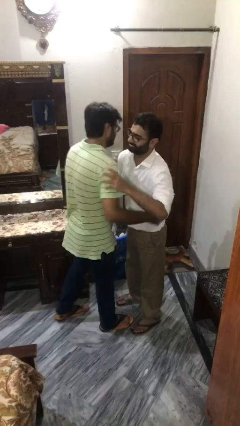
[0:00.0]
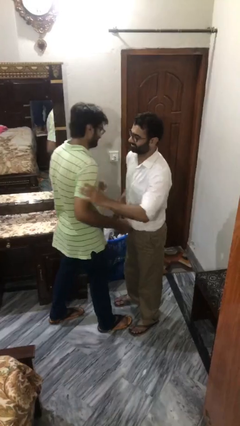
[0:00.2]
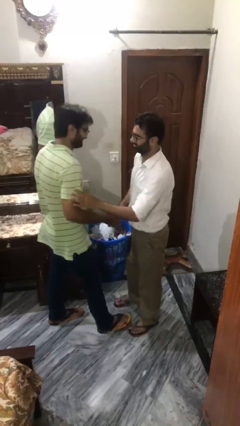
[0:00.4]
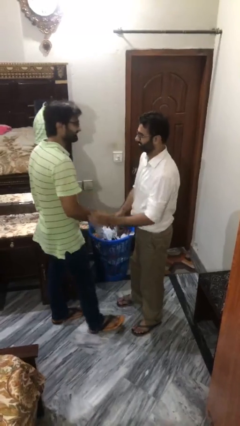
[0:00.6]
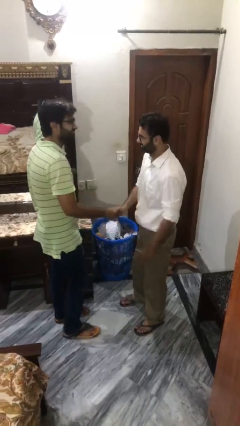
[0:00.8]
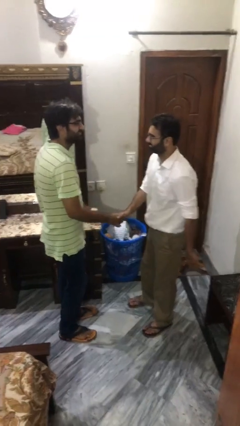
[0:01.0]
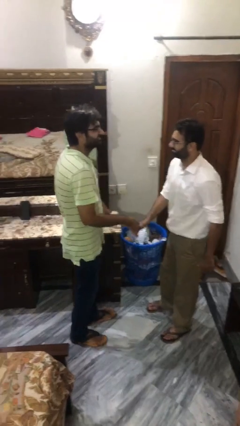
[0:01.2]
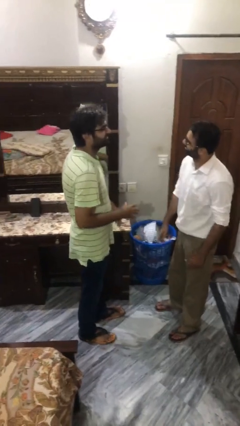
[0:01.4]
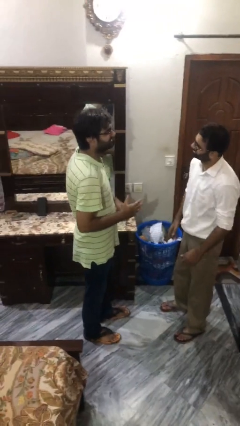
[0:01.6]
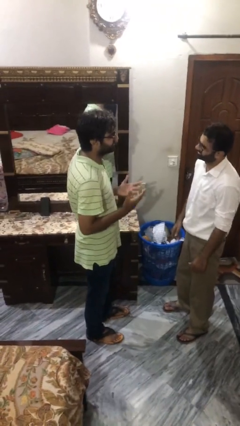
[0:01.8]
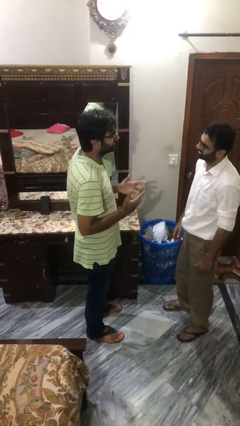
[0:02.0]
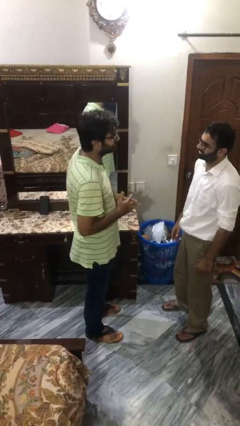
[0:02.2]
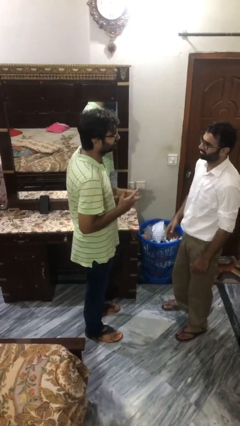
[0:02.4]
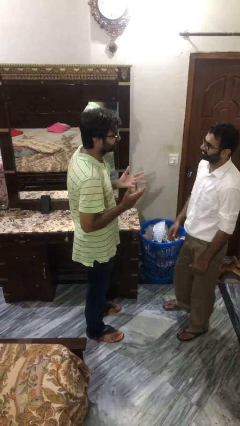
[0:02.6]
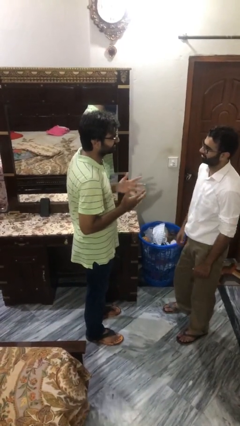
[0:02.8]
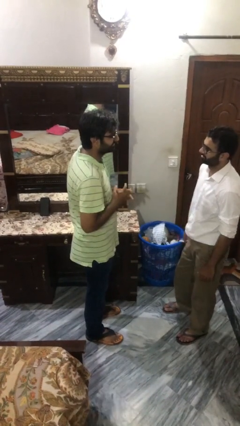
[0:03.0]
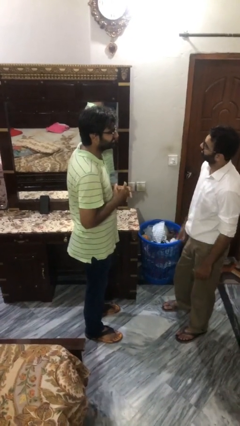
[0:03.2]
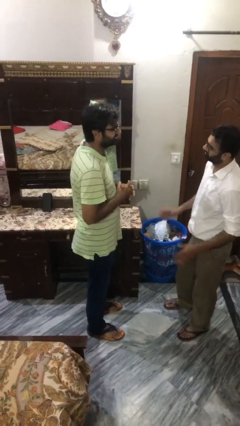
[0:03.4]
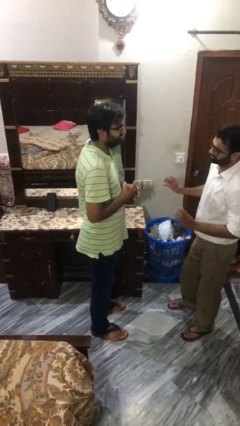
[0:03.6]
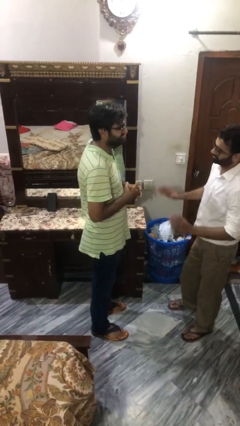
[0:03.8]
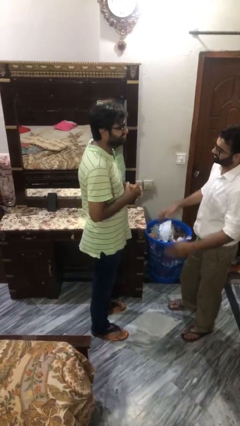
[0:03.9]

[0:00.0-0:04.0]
person talks to person

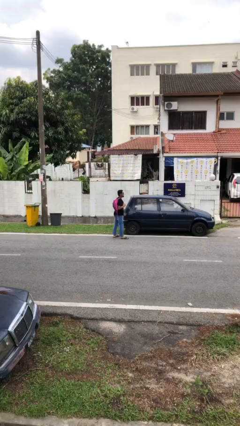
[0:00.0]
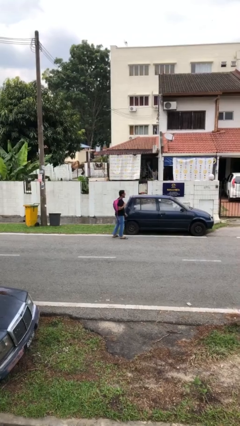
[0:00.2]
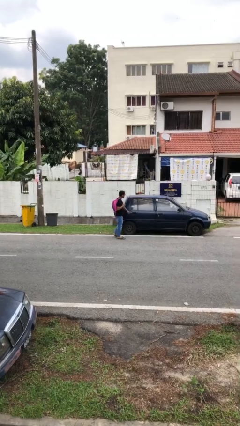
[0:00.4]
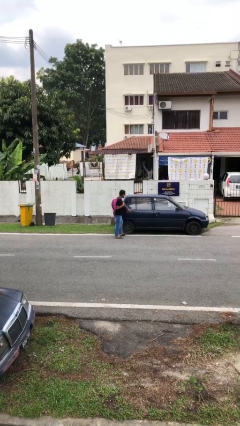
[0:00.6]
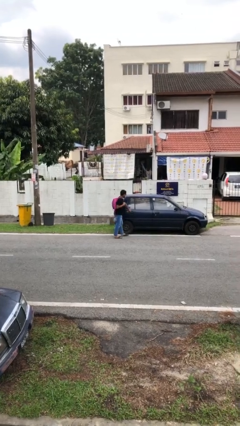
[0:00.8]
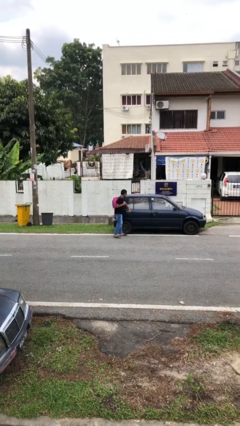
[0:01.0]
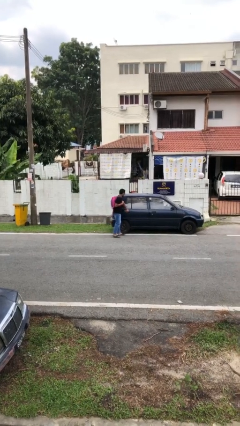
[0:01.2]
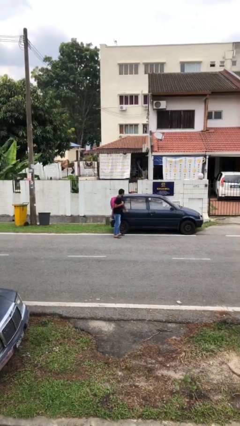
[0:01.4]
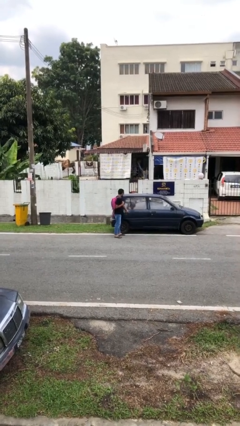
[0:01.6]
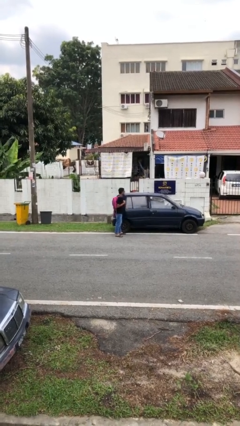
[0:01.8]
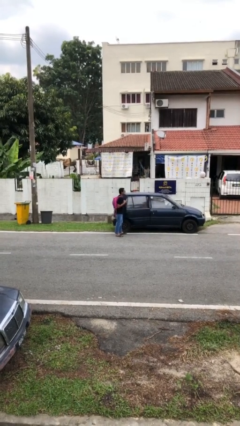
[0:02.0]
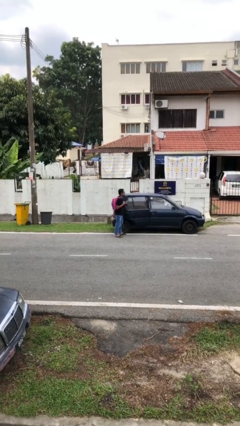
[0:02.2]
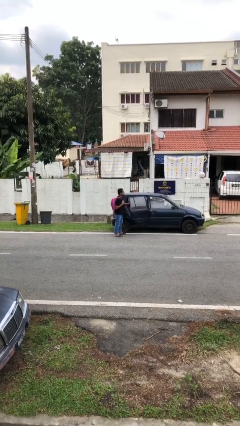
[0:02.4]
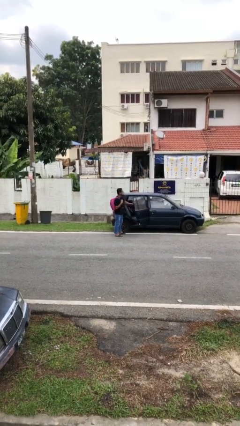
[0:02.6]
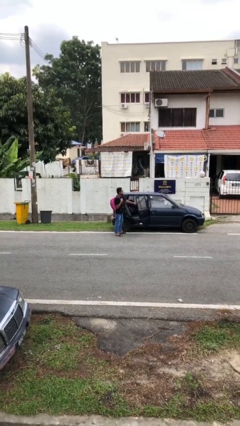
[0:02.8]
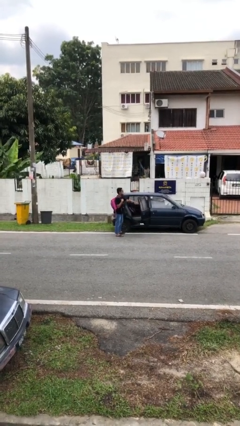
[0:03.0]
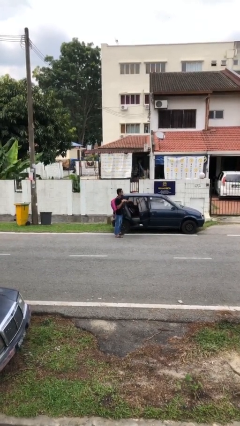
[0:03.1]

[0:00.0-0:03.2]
person opens car door

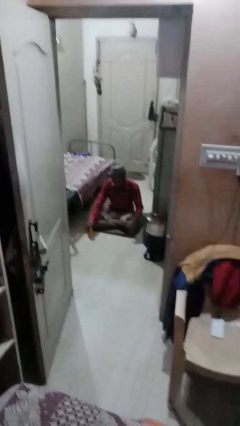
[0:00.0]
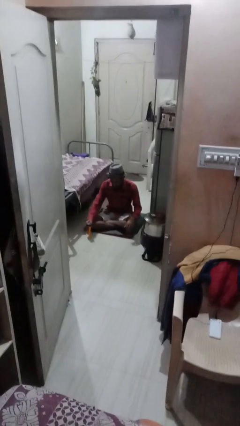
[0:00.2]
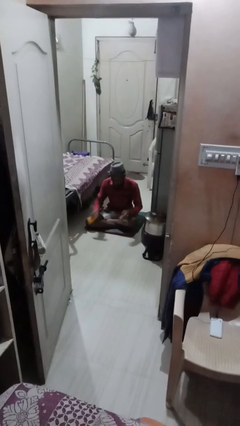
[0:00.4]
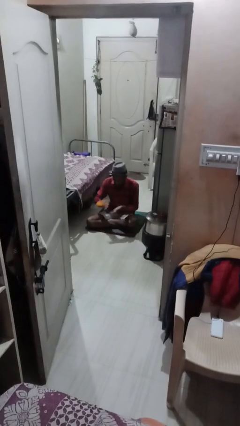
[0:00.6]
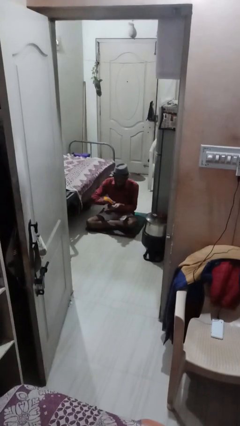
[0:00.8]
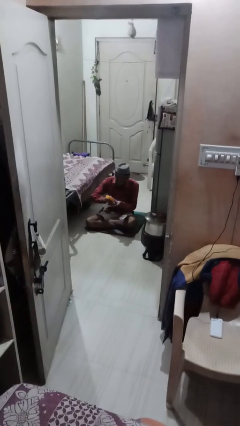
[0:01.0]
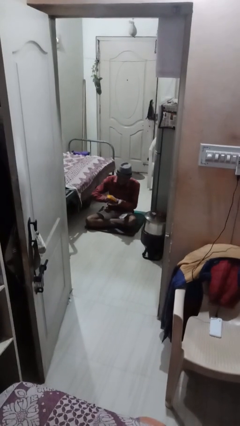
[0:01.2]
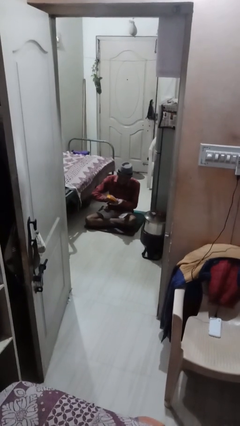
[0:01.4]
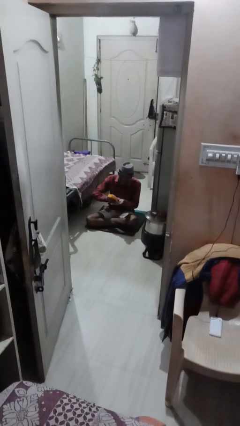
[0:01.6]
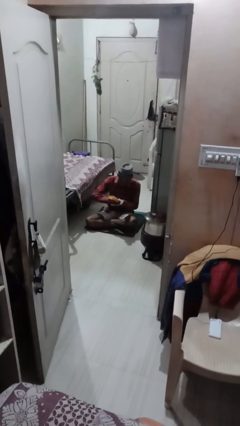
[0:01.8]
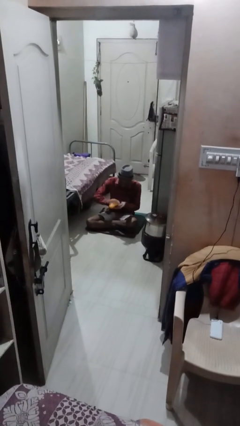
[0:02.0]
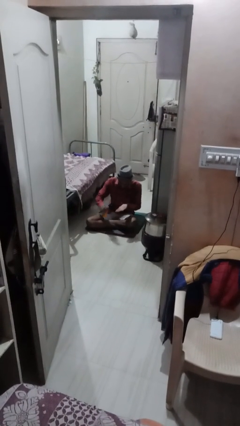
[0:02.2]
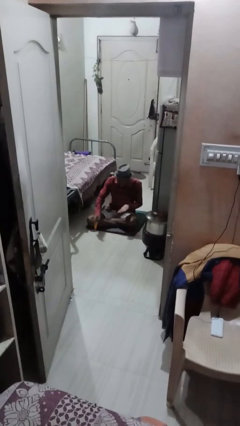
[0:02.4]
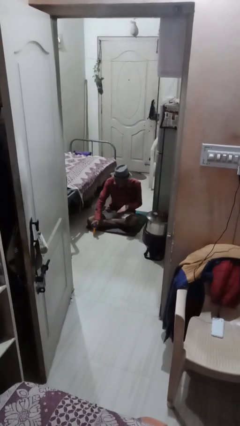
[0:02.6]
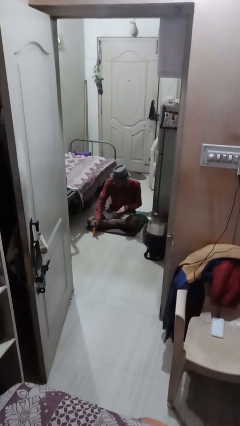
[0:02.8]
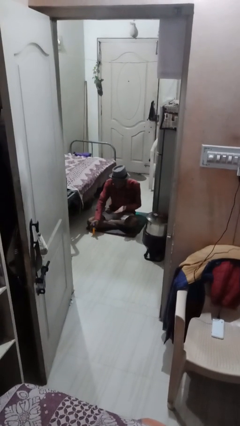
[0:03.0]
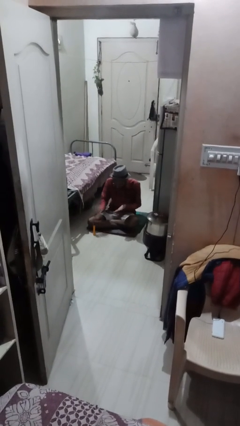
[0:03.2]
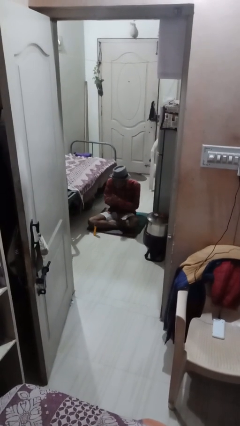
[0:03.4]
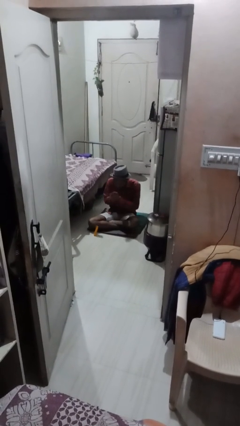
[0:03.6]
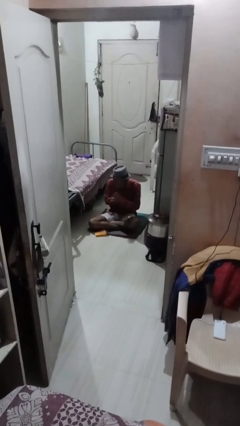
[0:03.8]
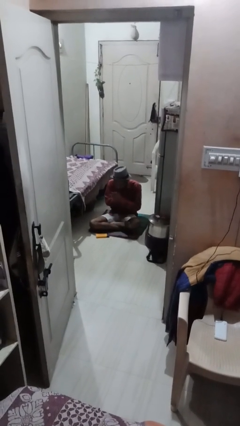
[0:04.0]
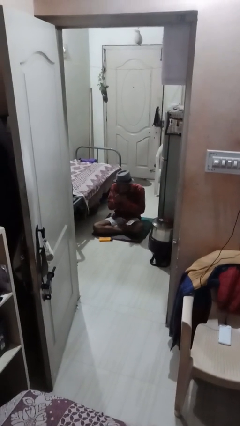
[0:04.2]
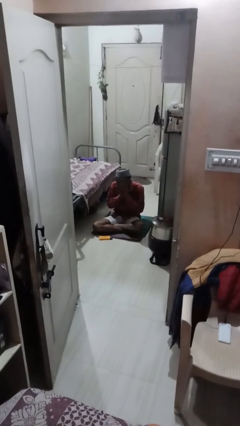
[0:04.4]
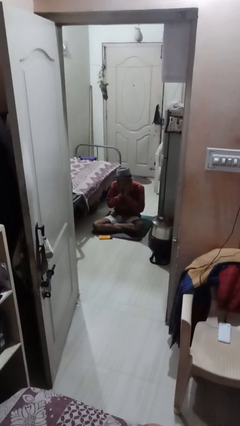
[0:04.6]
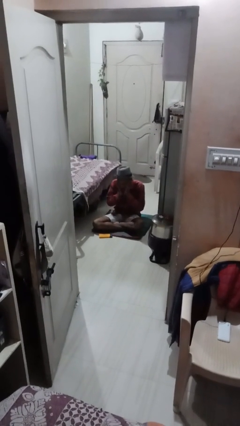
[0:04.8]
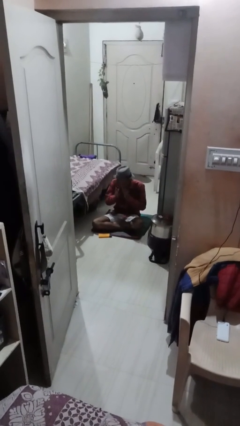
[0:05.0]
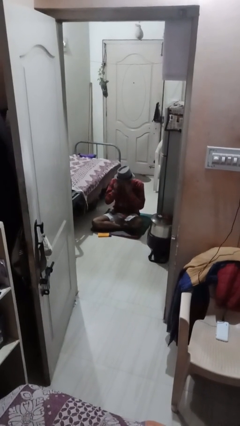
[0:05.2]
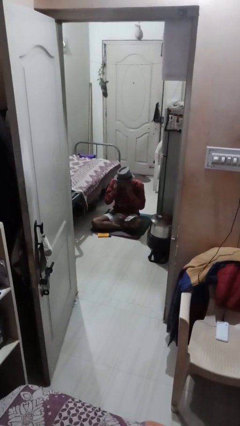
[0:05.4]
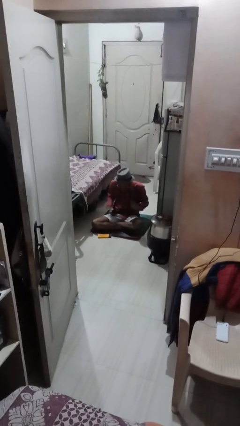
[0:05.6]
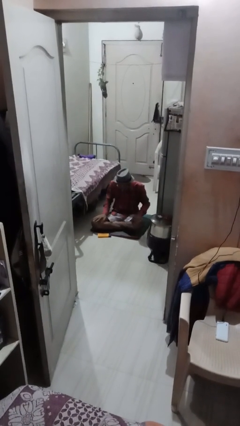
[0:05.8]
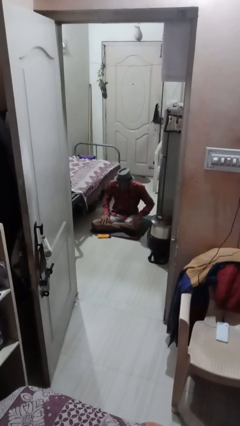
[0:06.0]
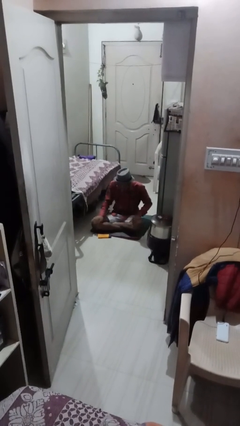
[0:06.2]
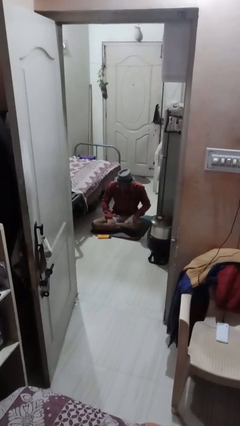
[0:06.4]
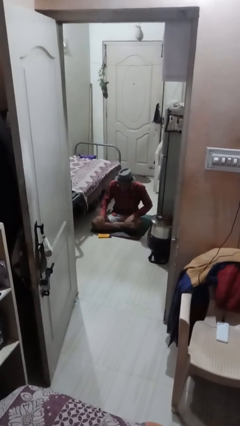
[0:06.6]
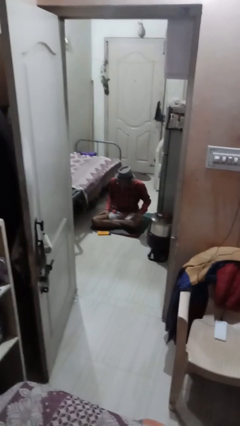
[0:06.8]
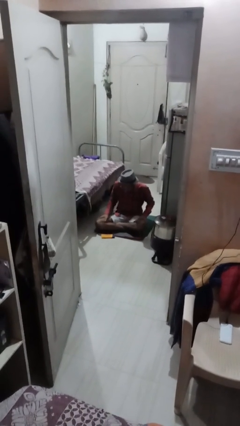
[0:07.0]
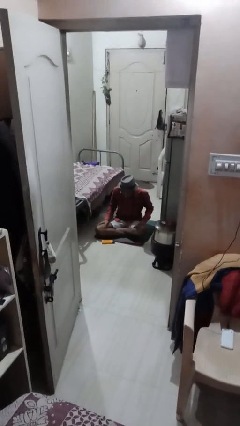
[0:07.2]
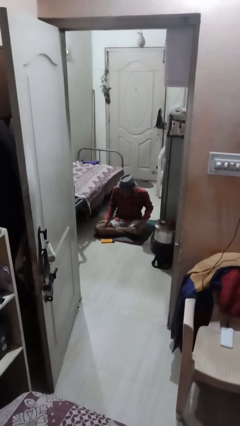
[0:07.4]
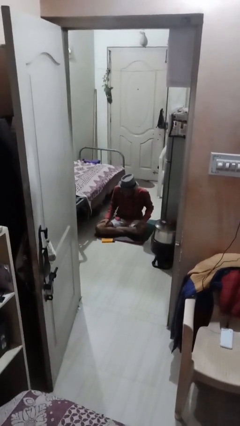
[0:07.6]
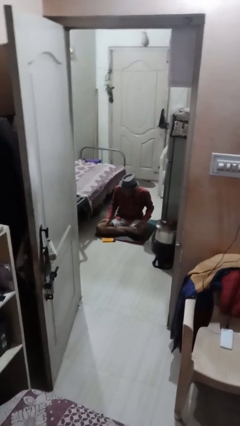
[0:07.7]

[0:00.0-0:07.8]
person applies sunscreen

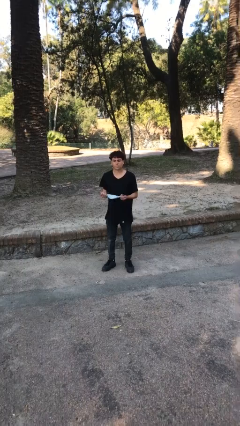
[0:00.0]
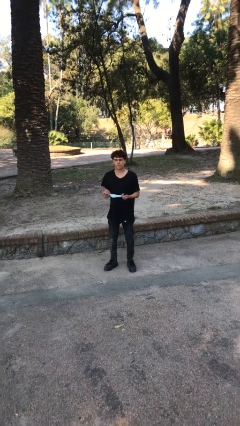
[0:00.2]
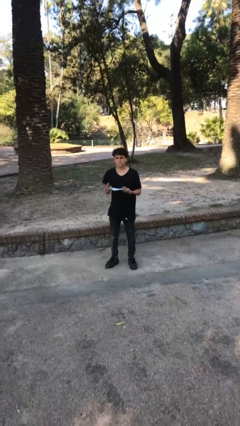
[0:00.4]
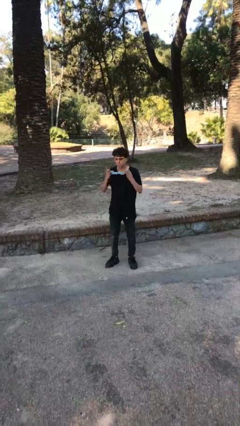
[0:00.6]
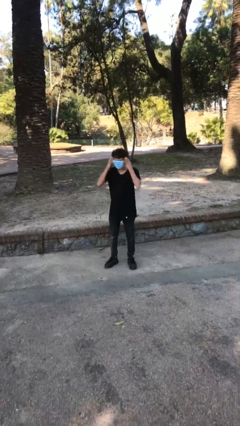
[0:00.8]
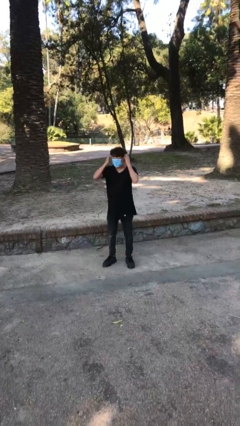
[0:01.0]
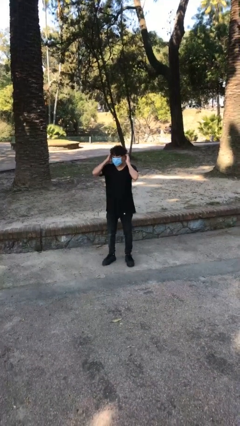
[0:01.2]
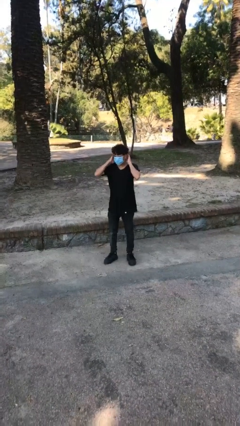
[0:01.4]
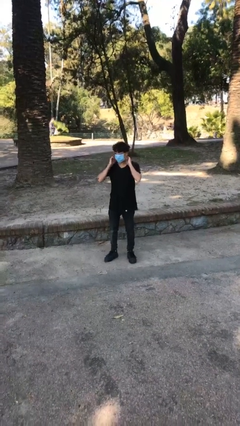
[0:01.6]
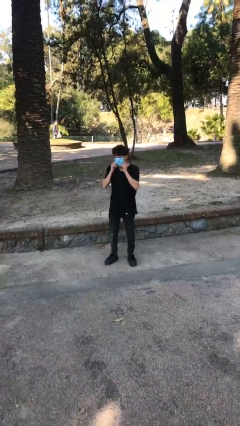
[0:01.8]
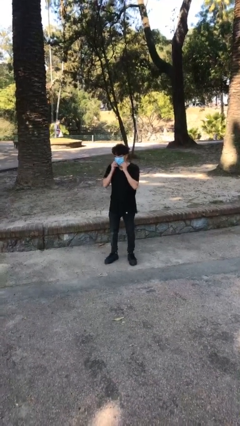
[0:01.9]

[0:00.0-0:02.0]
person puts on facemask

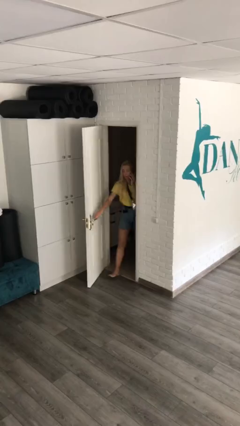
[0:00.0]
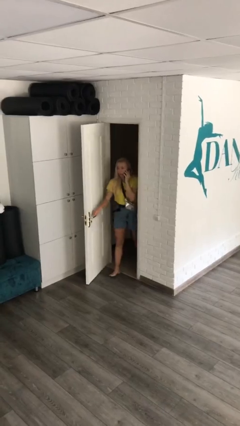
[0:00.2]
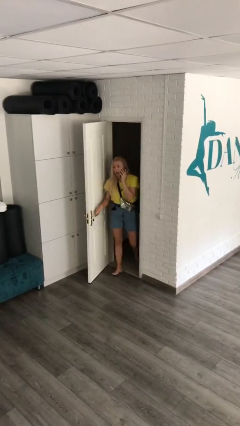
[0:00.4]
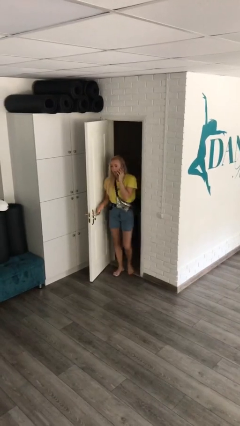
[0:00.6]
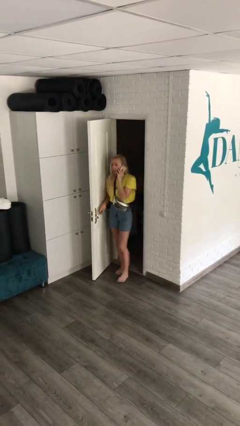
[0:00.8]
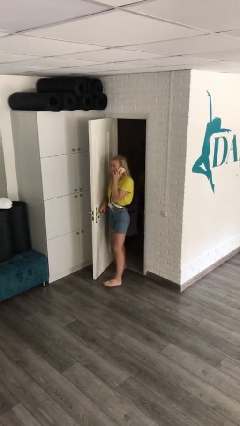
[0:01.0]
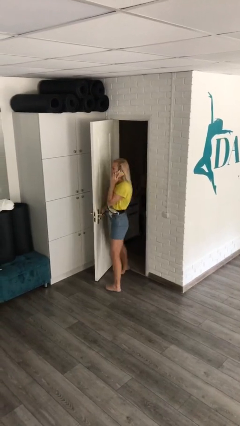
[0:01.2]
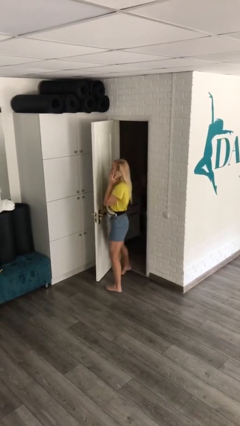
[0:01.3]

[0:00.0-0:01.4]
person enters scene through structure
